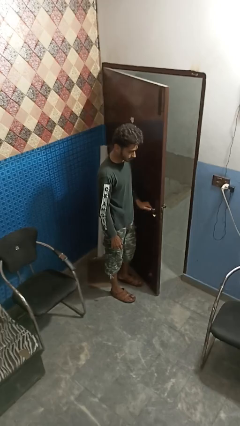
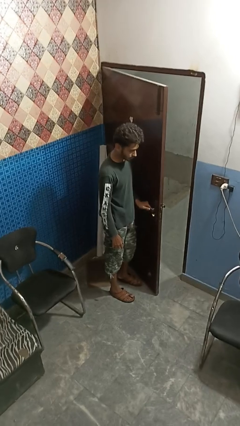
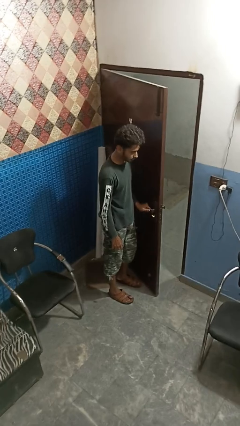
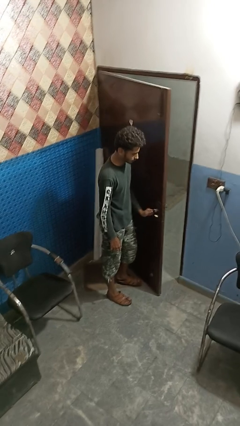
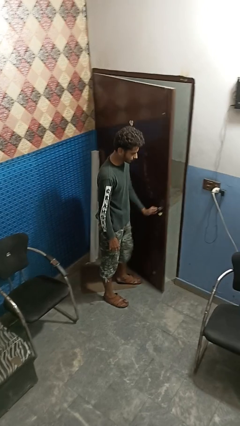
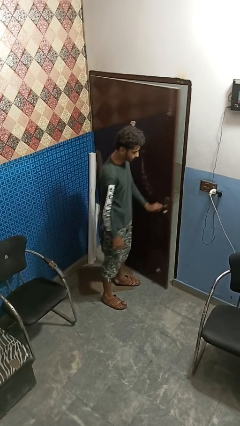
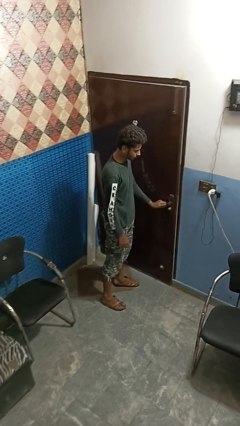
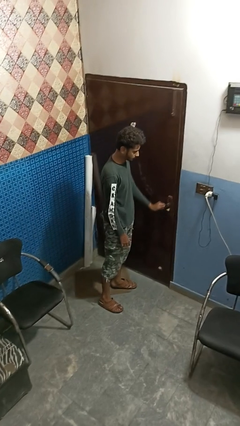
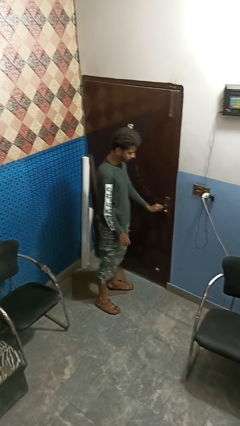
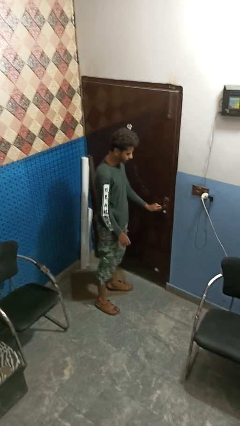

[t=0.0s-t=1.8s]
person closes facility door

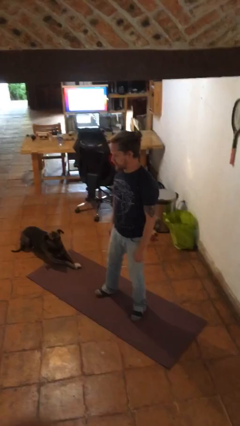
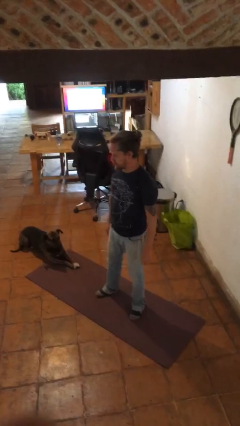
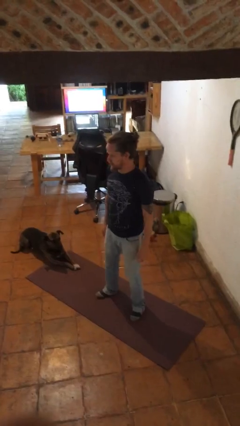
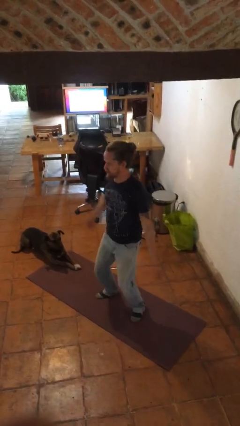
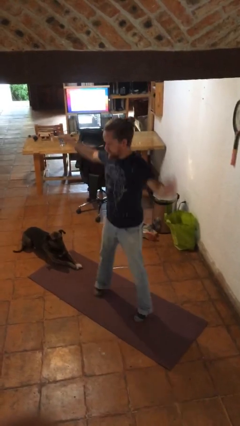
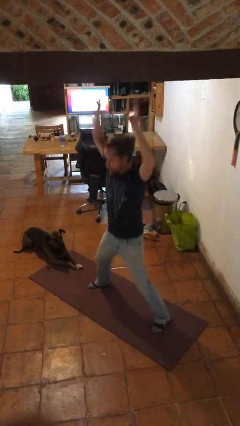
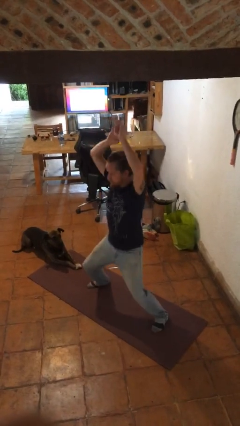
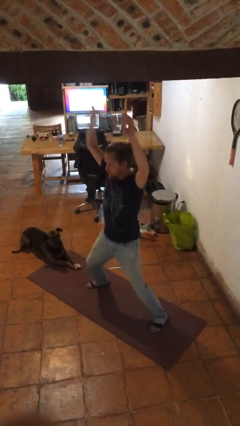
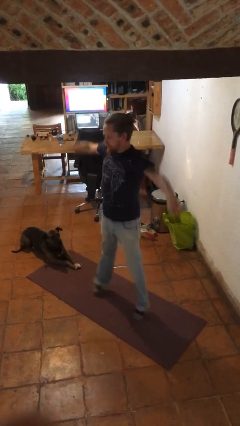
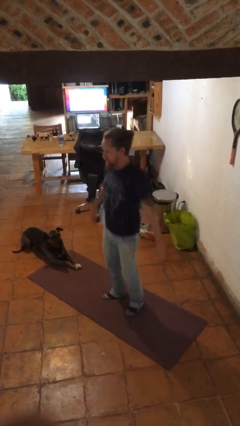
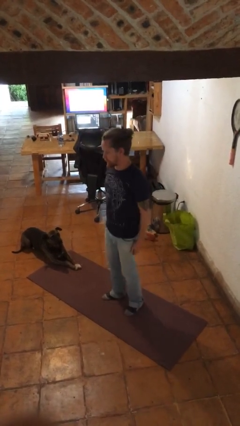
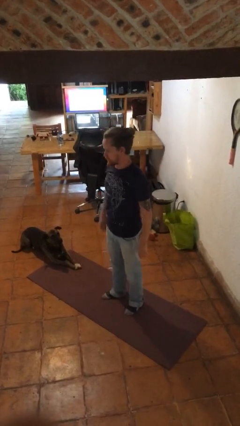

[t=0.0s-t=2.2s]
person exercises with jumping jacks

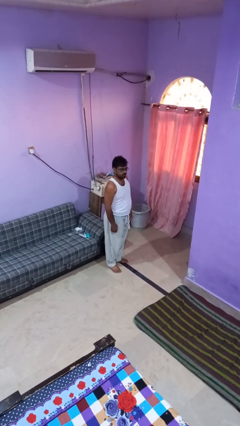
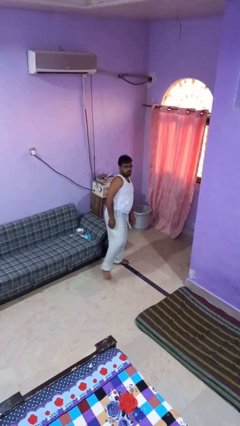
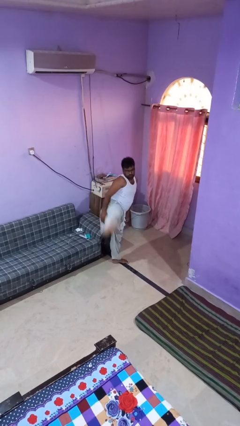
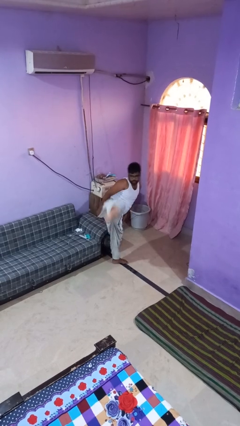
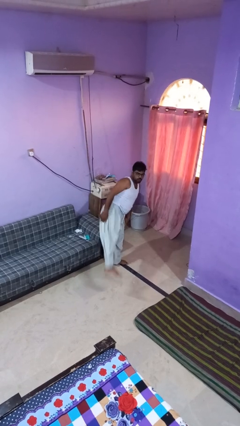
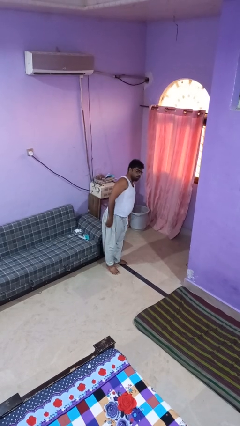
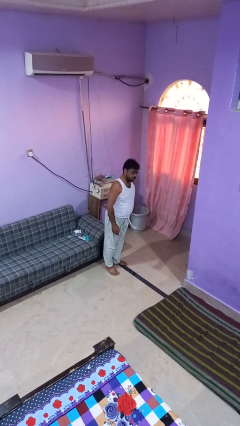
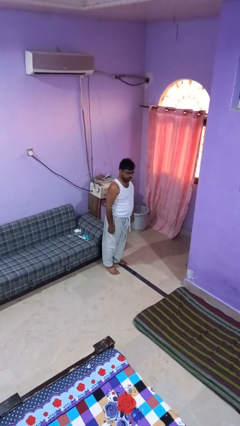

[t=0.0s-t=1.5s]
person karate kicks

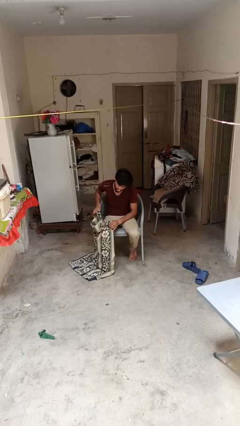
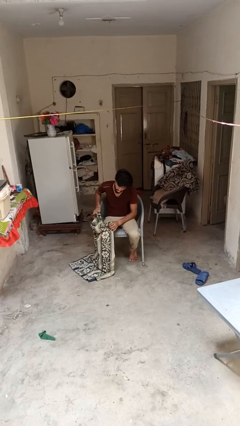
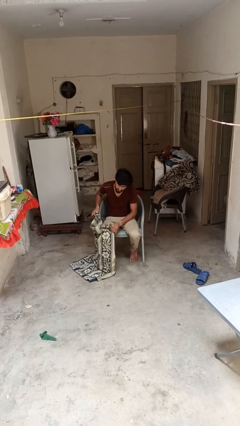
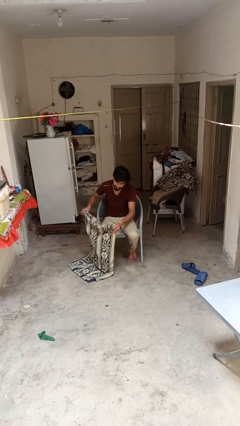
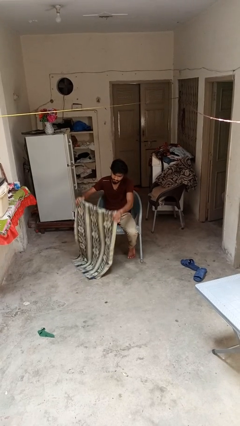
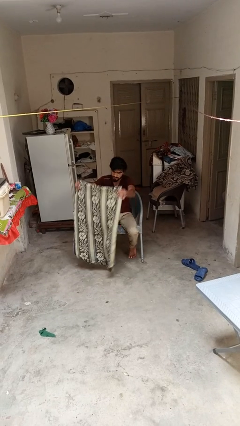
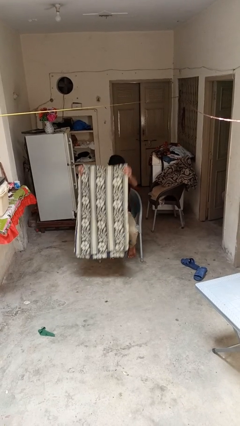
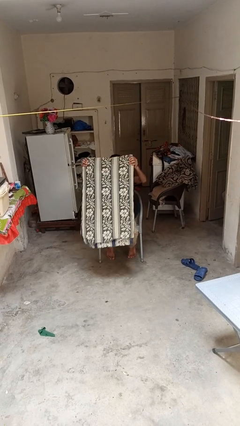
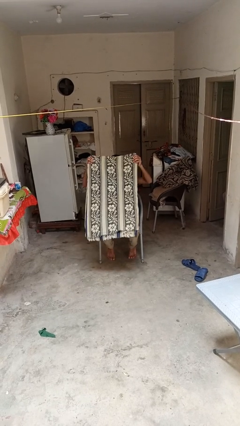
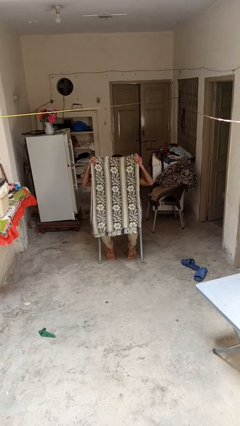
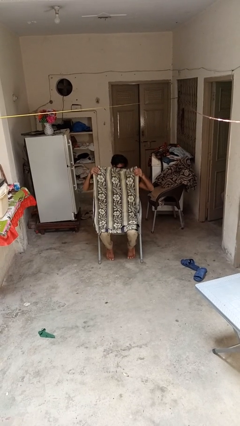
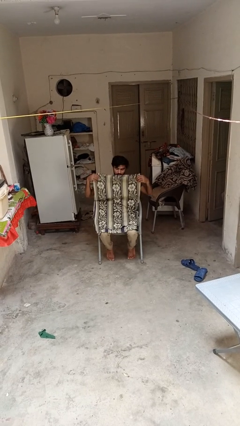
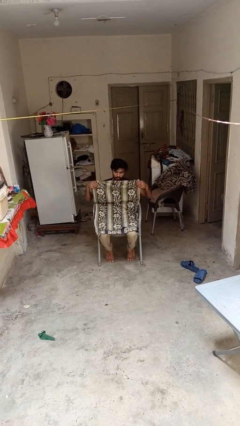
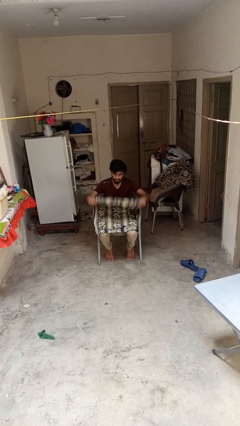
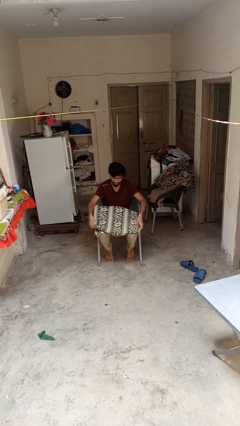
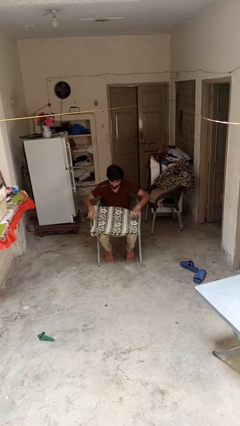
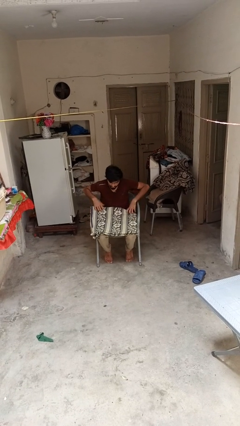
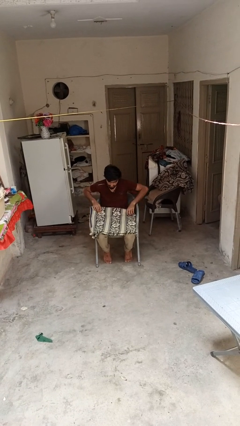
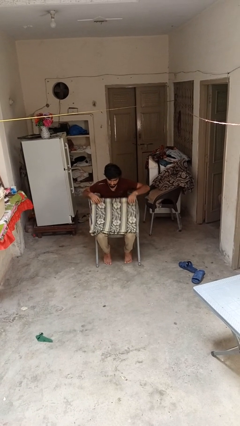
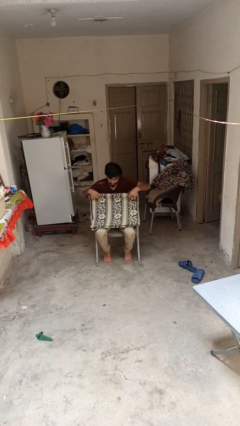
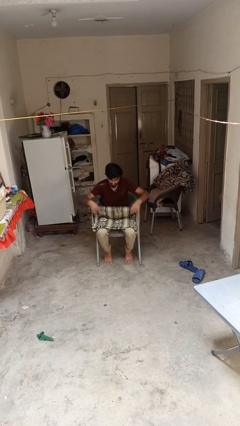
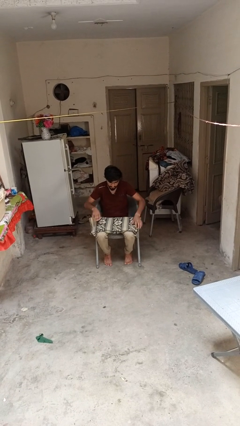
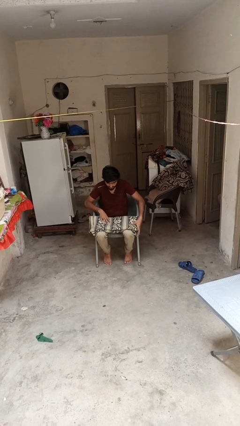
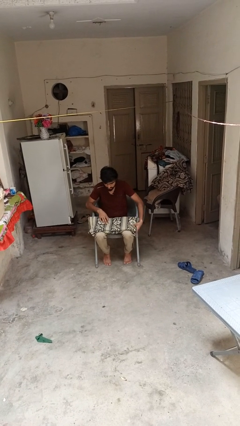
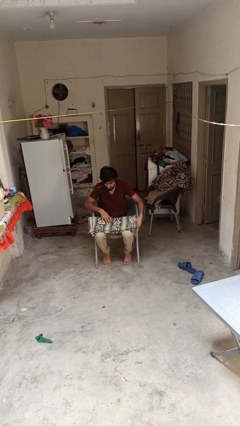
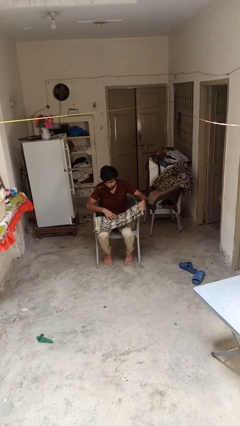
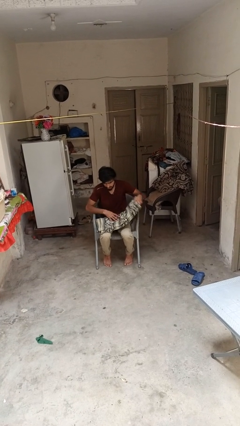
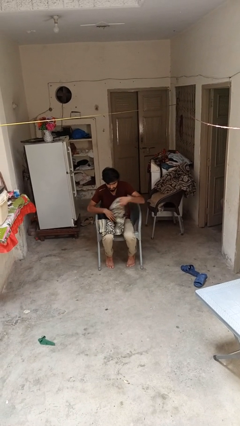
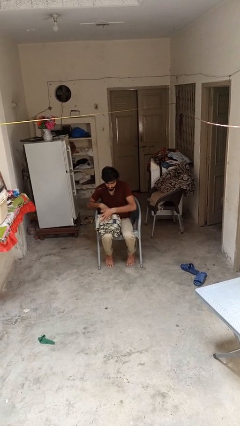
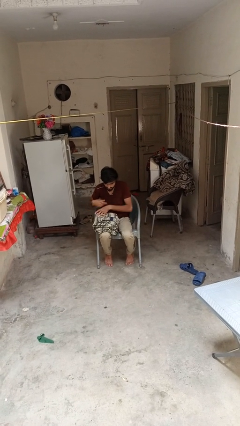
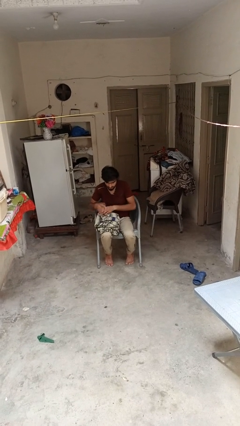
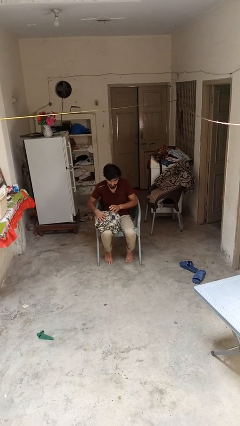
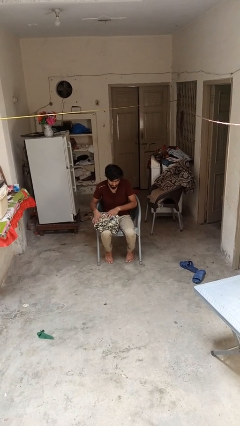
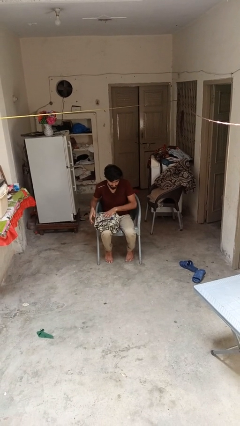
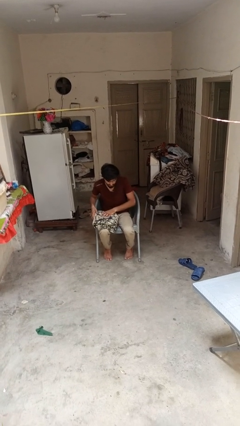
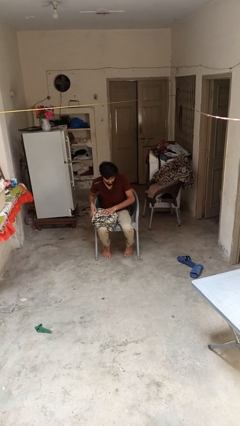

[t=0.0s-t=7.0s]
person folds blanket

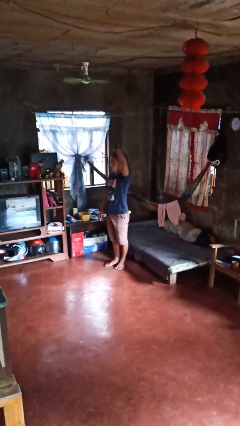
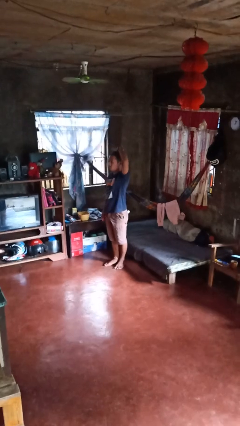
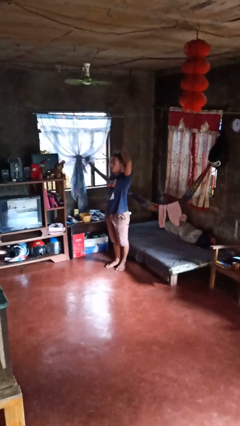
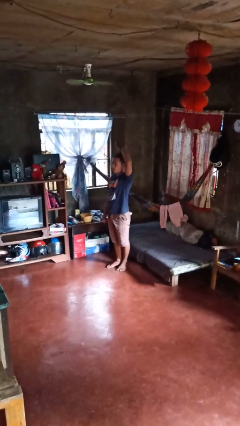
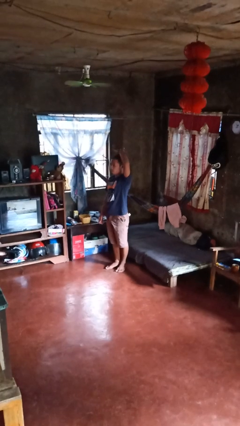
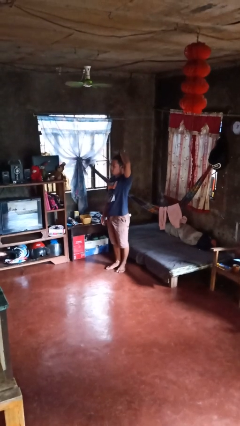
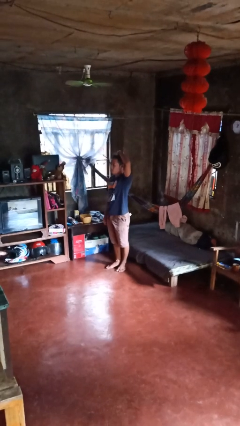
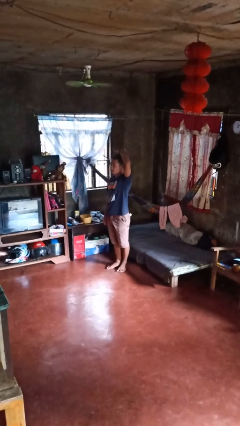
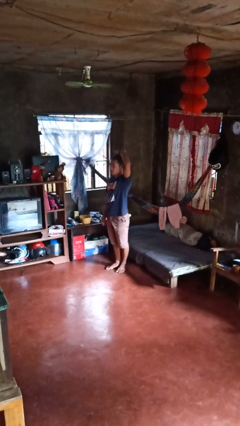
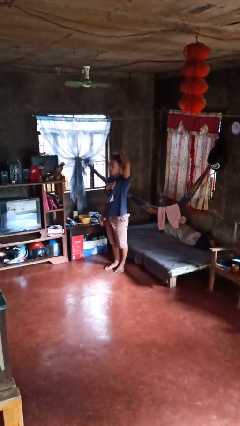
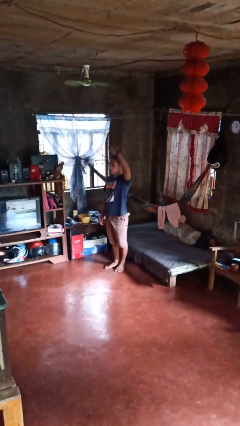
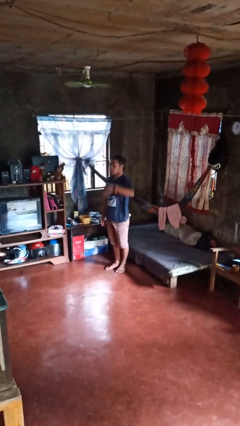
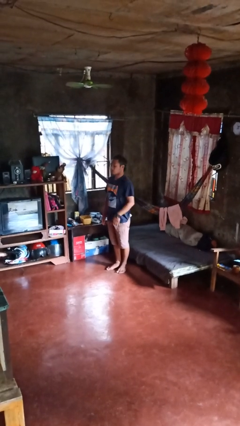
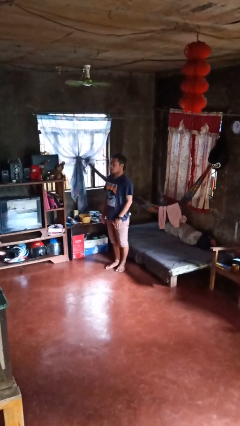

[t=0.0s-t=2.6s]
person pats head

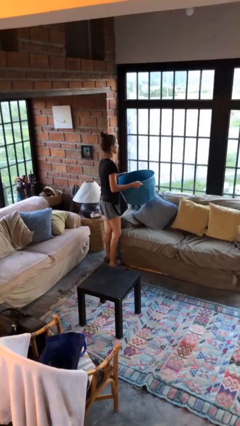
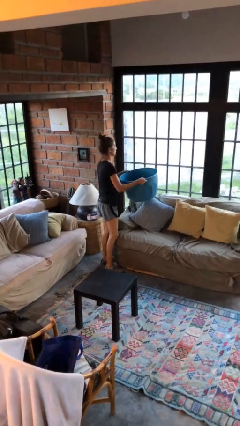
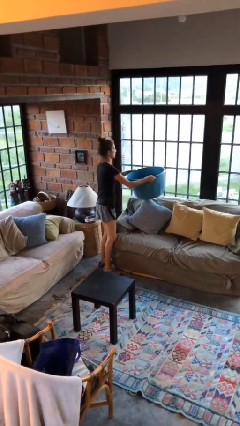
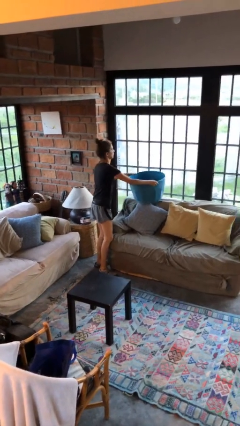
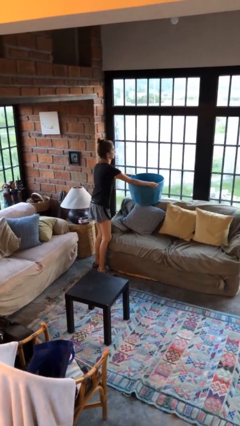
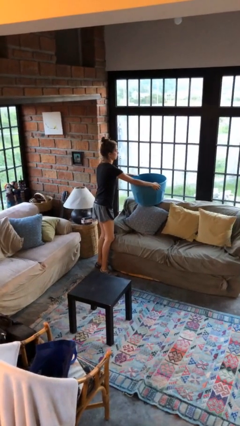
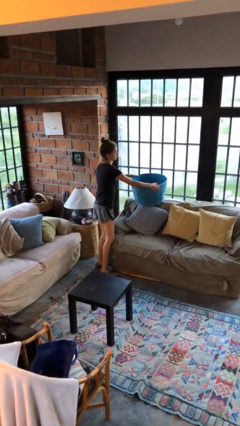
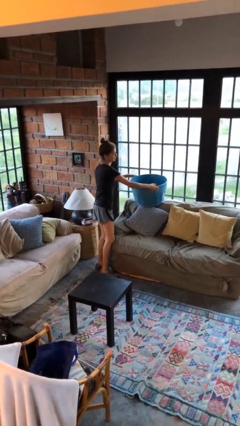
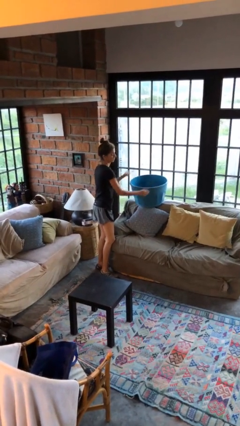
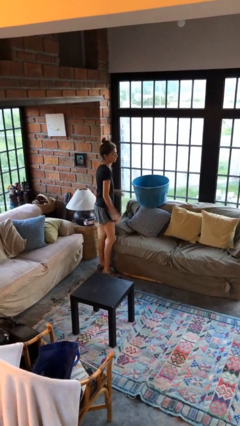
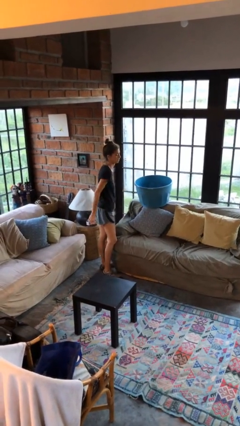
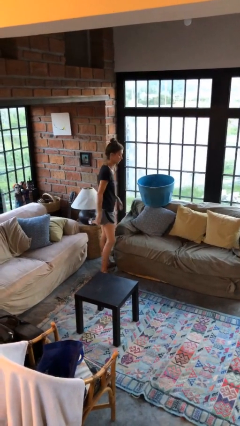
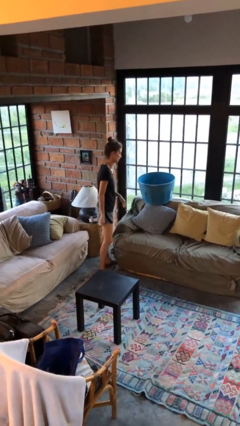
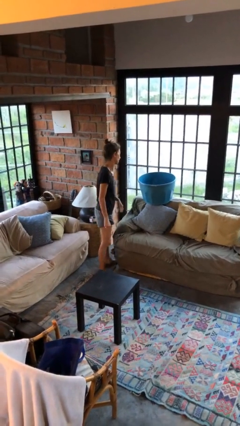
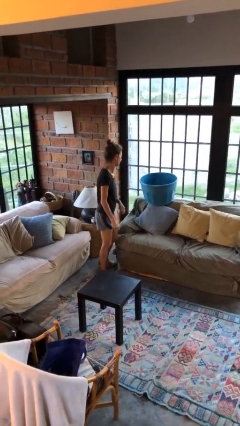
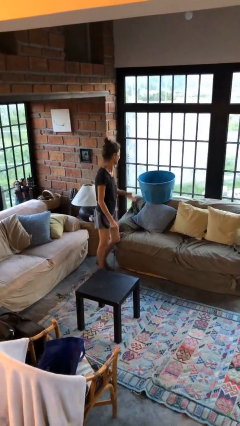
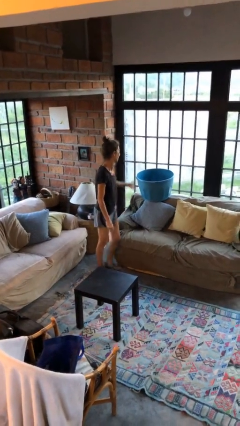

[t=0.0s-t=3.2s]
person puts down object on couch
